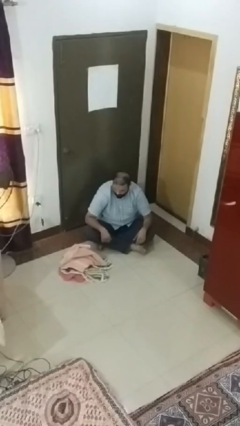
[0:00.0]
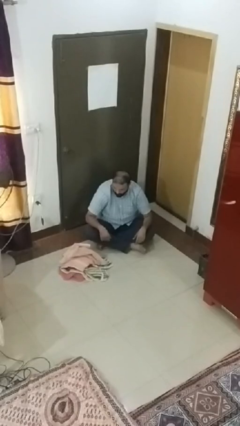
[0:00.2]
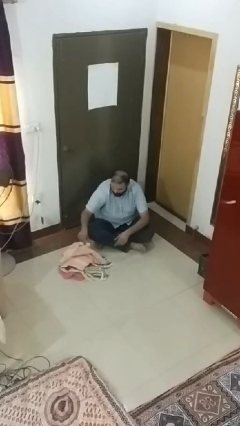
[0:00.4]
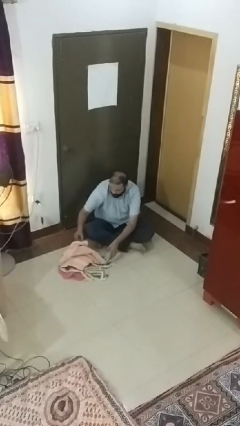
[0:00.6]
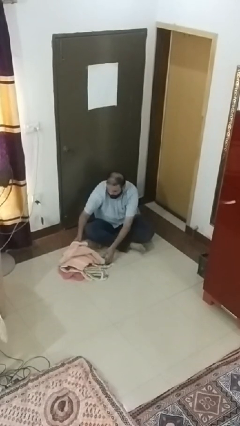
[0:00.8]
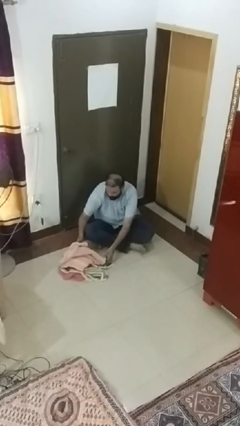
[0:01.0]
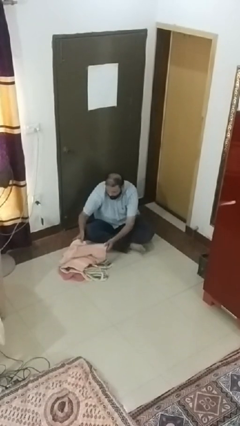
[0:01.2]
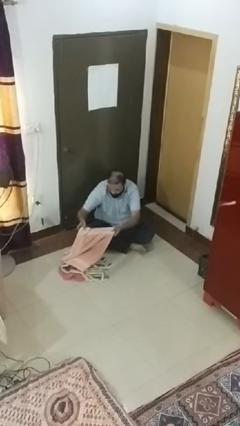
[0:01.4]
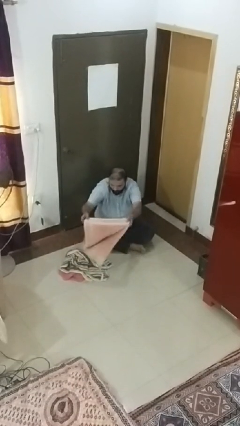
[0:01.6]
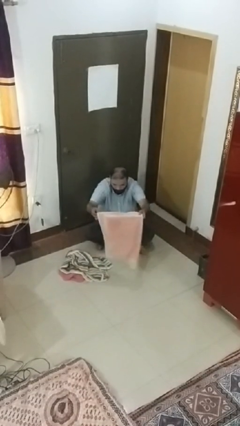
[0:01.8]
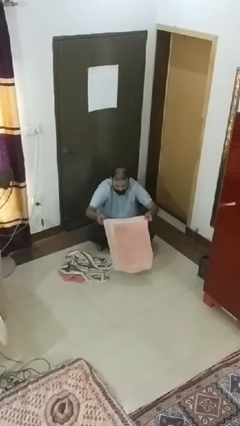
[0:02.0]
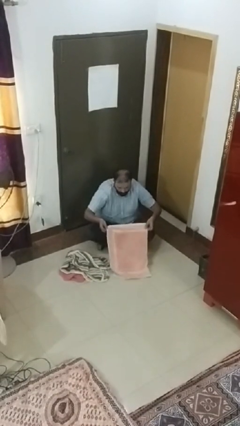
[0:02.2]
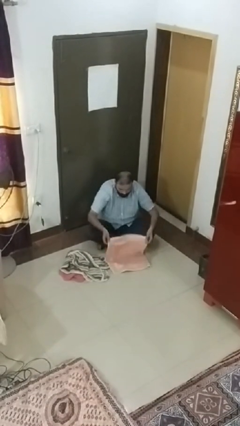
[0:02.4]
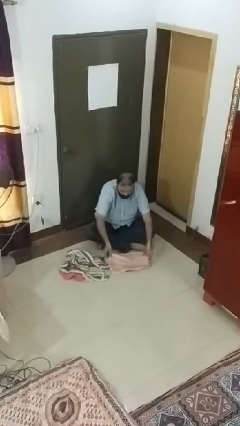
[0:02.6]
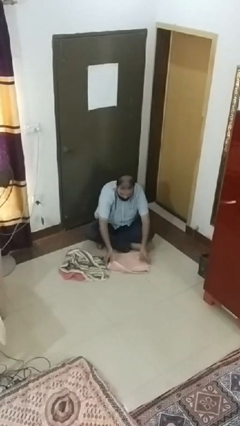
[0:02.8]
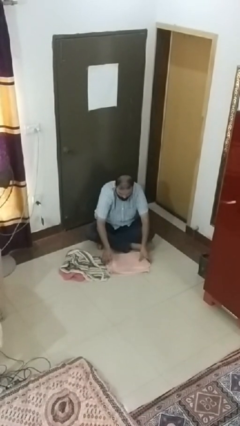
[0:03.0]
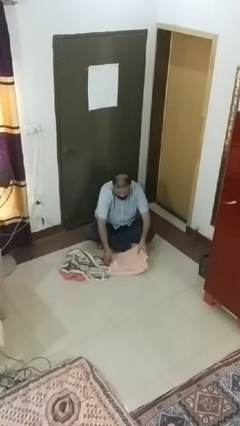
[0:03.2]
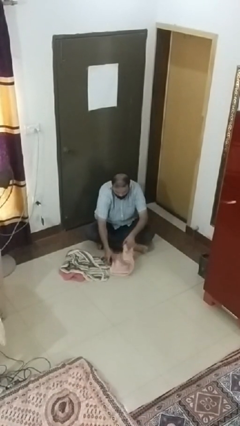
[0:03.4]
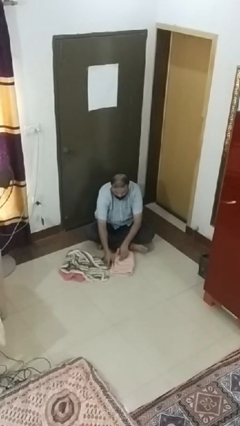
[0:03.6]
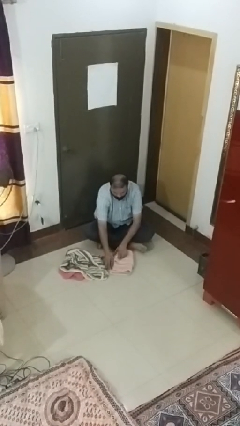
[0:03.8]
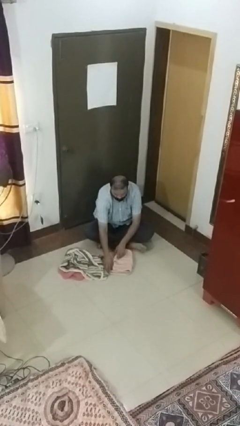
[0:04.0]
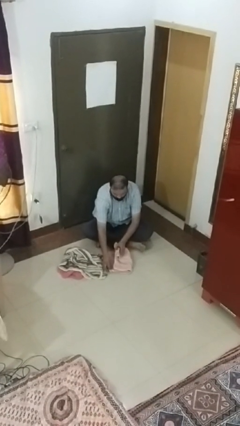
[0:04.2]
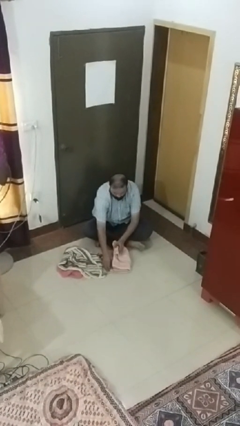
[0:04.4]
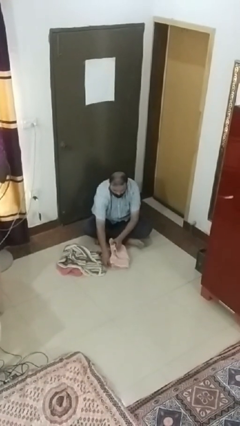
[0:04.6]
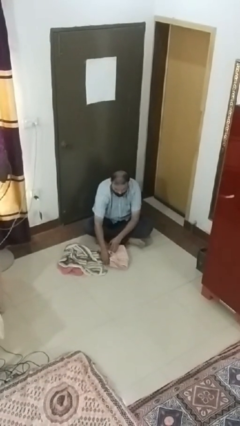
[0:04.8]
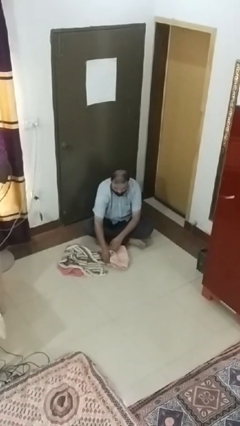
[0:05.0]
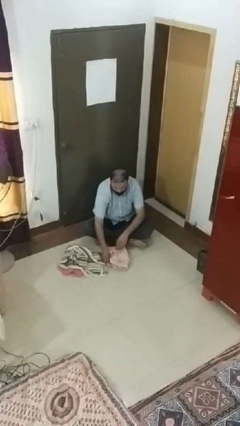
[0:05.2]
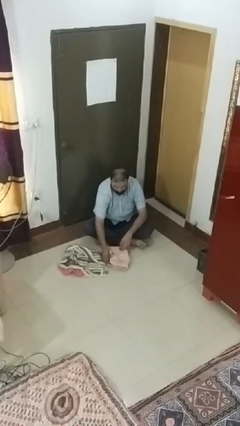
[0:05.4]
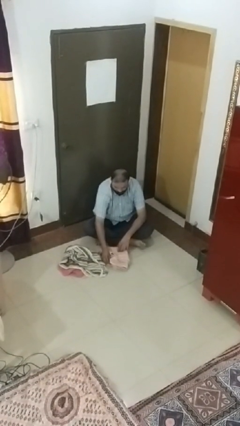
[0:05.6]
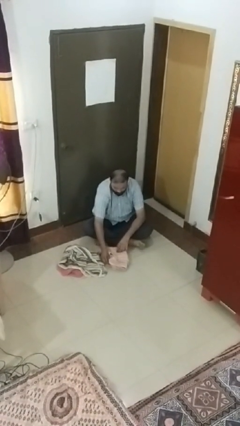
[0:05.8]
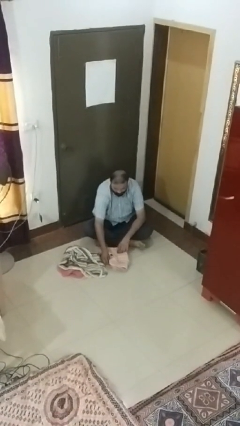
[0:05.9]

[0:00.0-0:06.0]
person folds towel

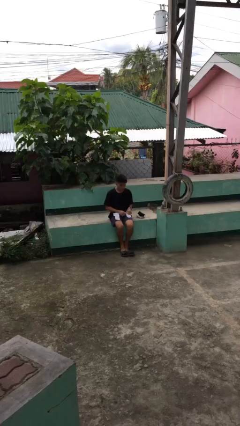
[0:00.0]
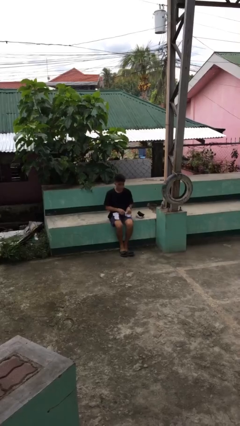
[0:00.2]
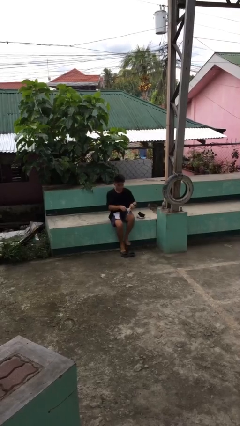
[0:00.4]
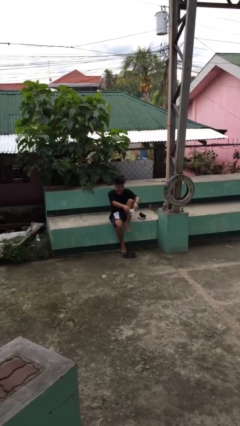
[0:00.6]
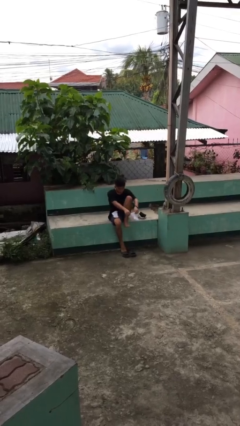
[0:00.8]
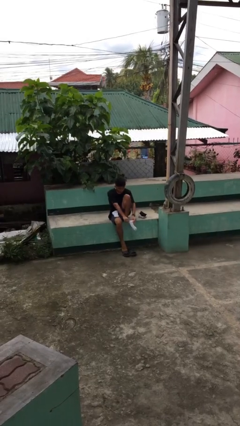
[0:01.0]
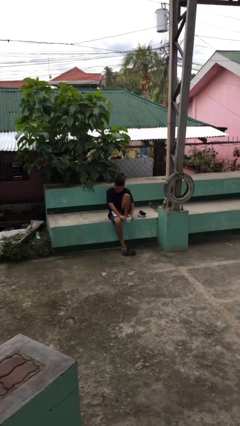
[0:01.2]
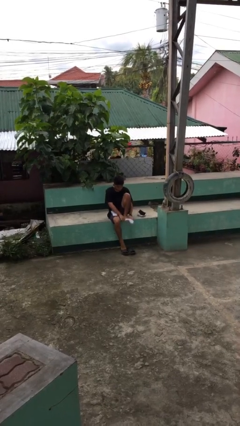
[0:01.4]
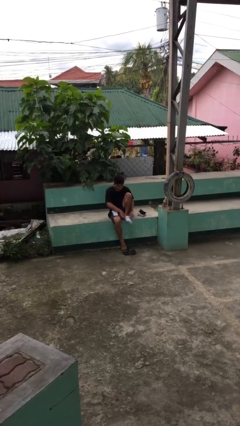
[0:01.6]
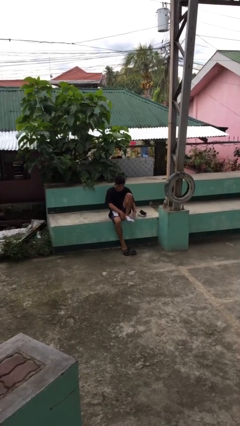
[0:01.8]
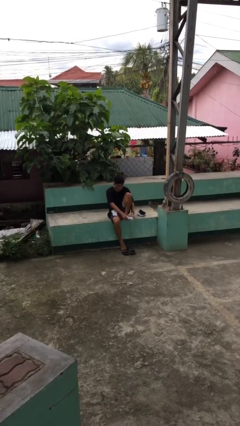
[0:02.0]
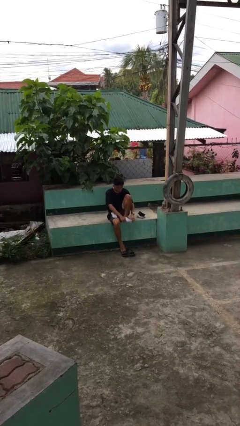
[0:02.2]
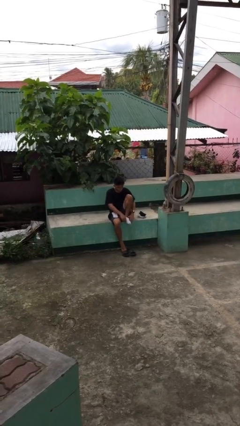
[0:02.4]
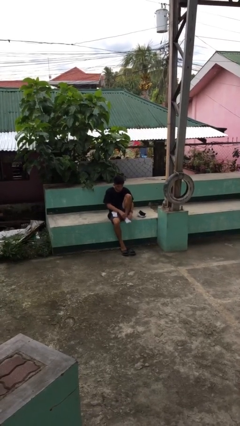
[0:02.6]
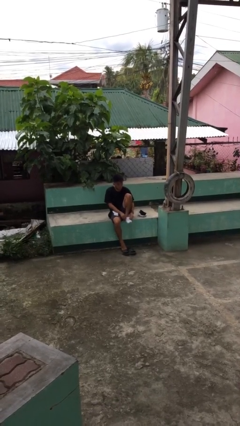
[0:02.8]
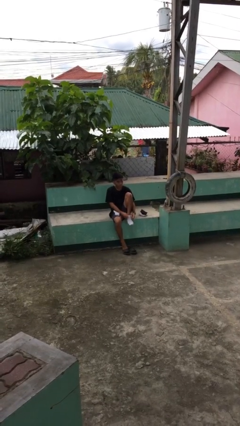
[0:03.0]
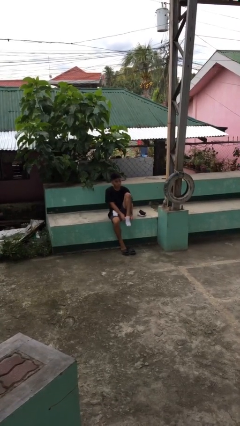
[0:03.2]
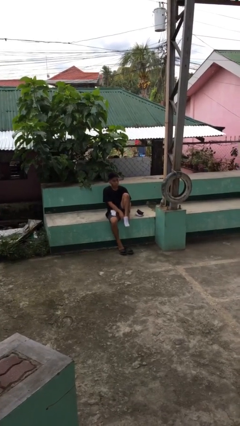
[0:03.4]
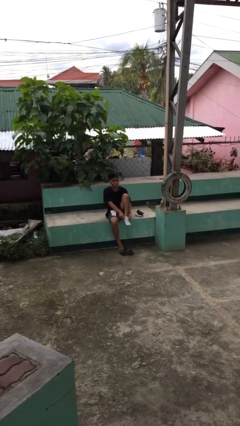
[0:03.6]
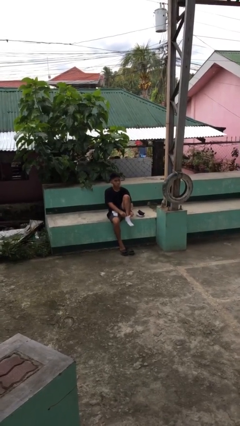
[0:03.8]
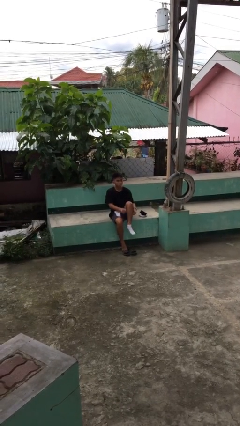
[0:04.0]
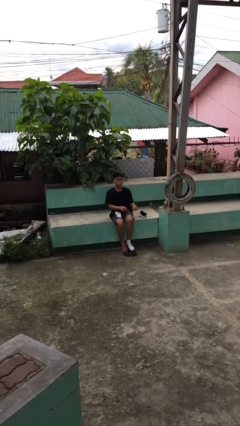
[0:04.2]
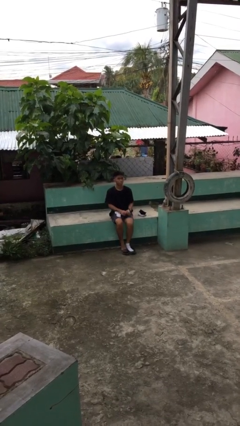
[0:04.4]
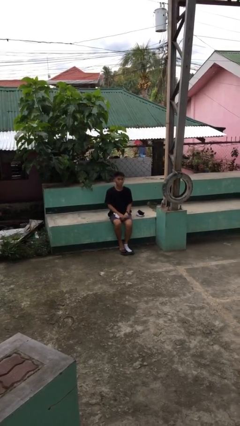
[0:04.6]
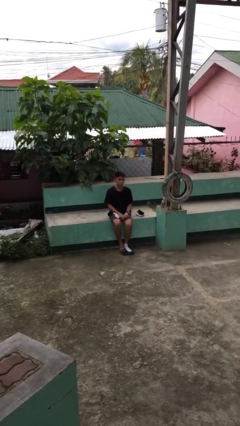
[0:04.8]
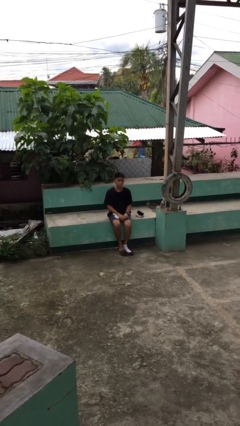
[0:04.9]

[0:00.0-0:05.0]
person puts on socks

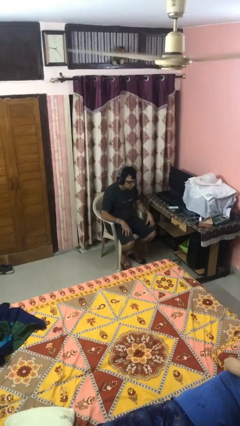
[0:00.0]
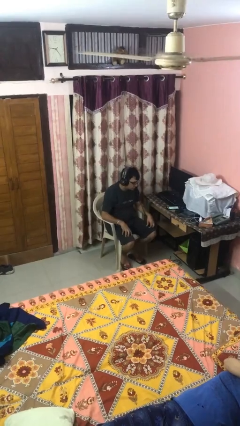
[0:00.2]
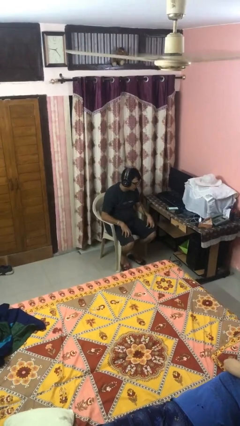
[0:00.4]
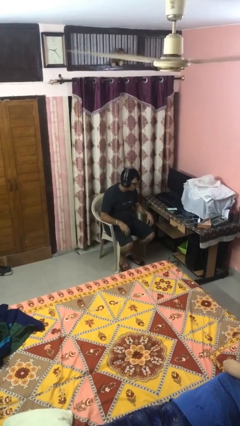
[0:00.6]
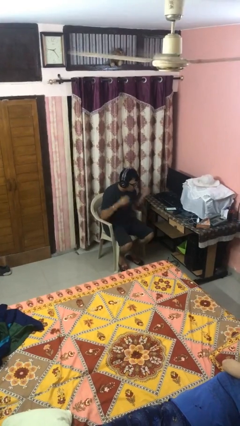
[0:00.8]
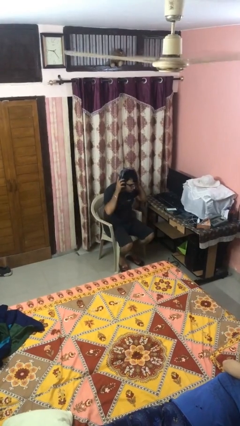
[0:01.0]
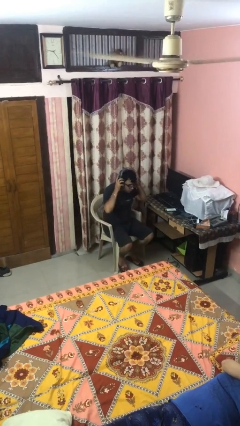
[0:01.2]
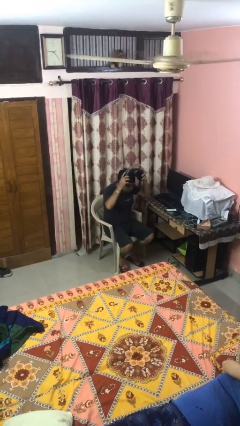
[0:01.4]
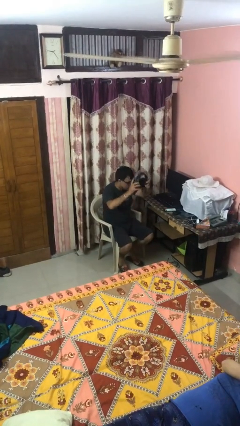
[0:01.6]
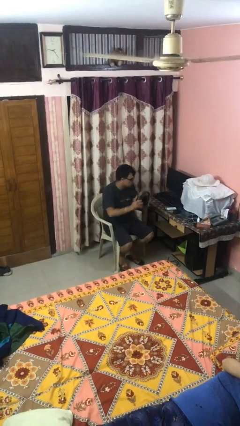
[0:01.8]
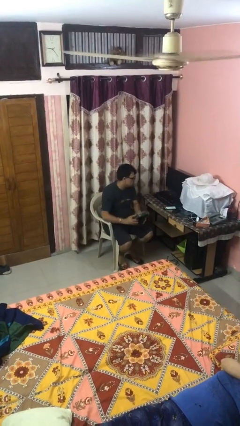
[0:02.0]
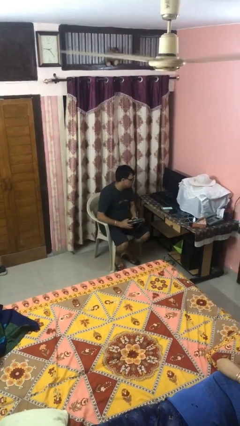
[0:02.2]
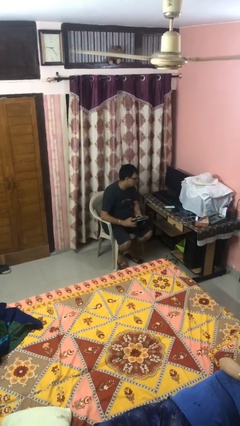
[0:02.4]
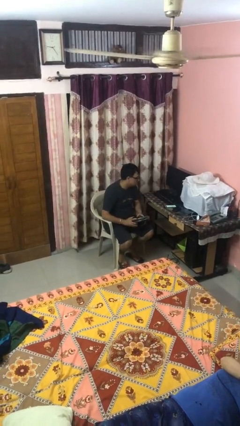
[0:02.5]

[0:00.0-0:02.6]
person takes off headphones

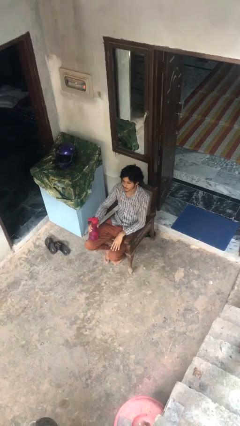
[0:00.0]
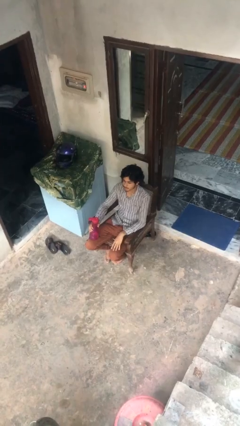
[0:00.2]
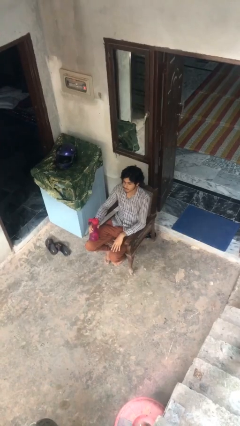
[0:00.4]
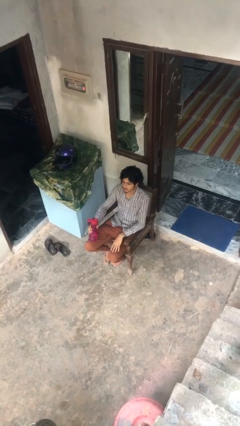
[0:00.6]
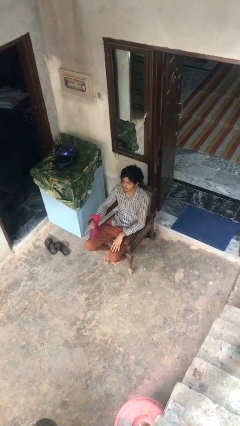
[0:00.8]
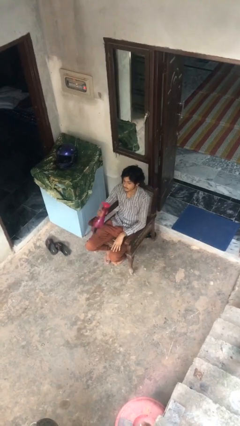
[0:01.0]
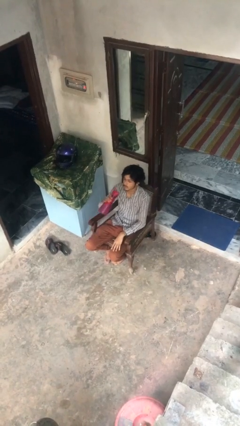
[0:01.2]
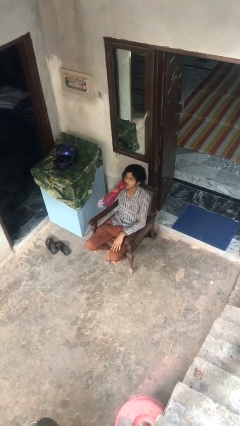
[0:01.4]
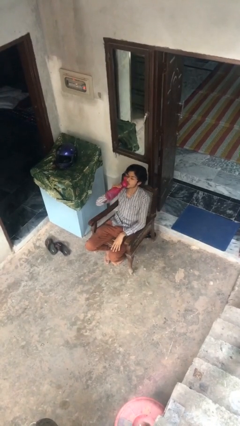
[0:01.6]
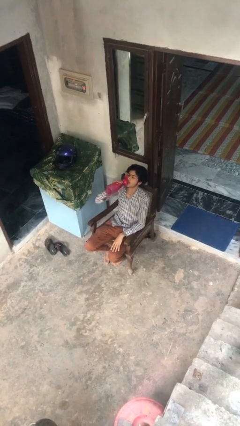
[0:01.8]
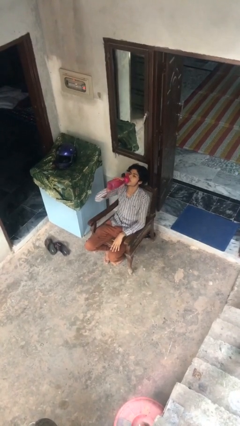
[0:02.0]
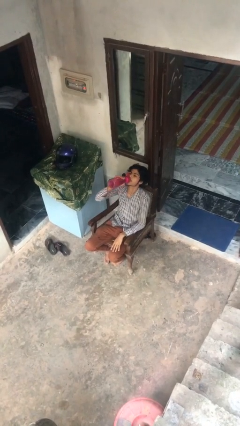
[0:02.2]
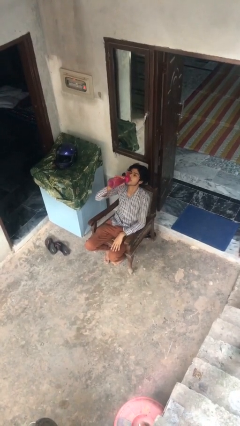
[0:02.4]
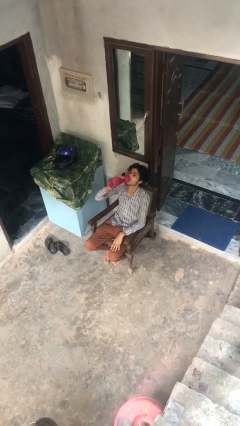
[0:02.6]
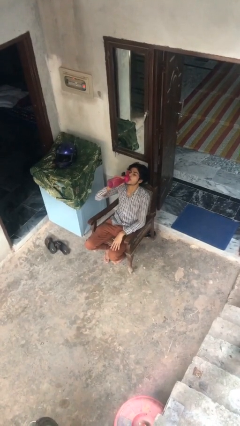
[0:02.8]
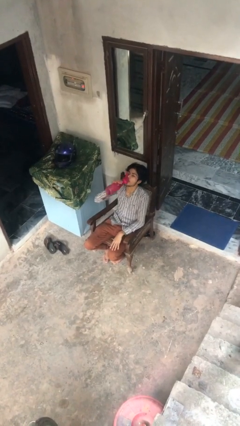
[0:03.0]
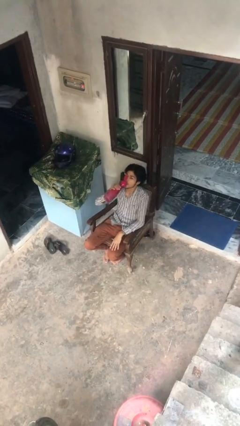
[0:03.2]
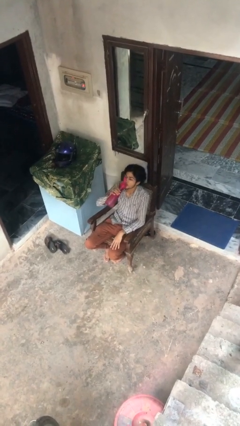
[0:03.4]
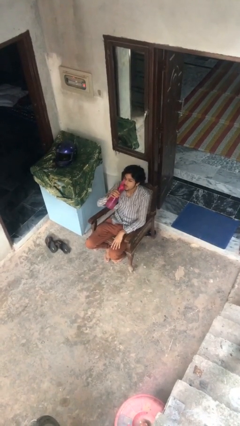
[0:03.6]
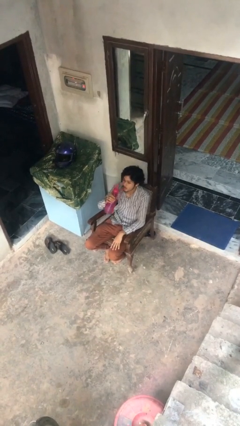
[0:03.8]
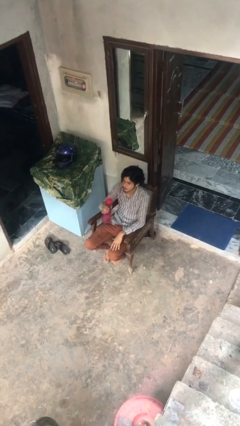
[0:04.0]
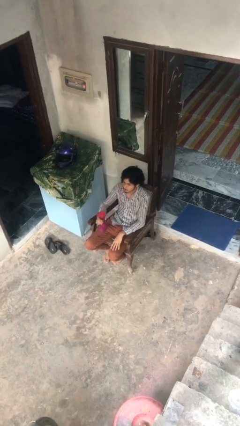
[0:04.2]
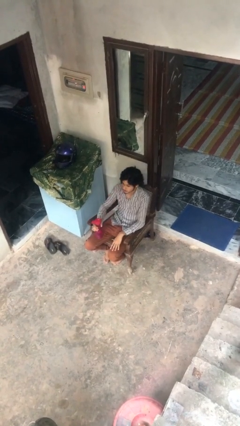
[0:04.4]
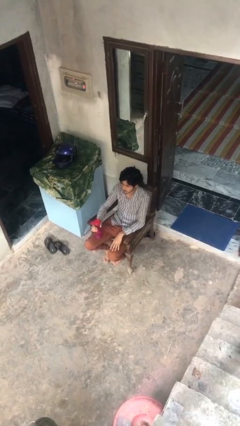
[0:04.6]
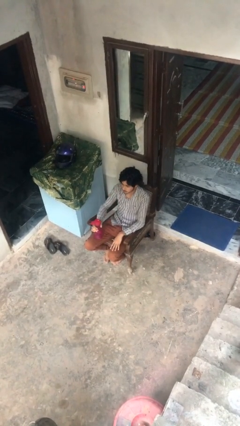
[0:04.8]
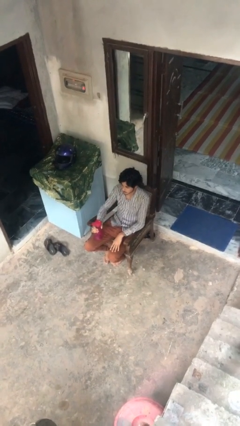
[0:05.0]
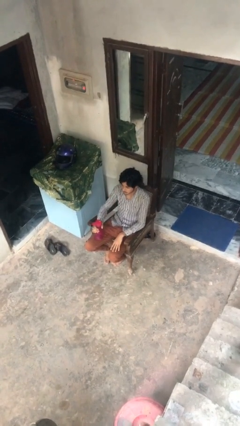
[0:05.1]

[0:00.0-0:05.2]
person drinks from bottle
